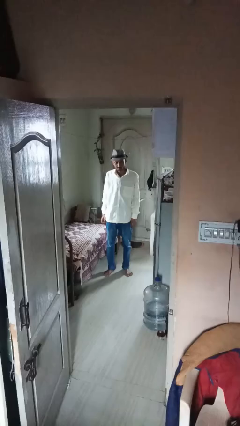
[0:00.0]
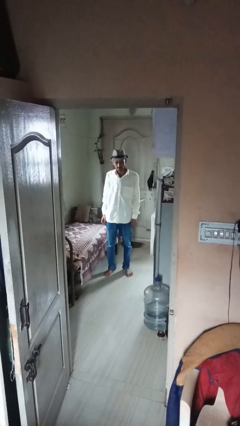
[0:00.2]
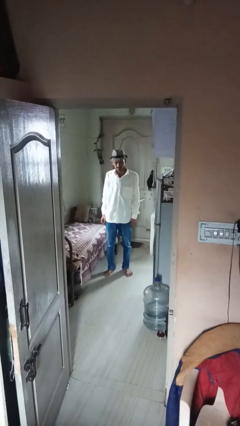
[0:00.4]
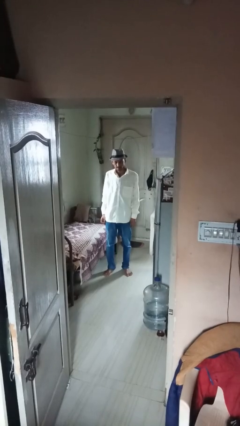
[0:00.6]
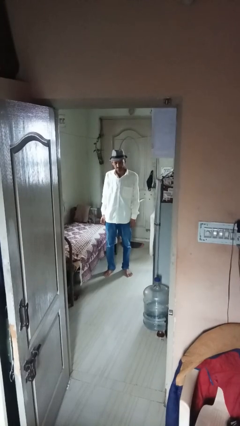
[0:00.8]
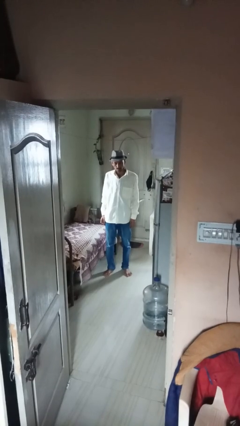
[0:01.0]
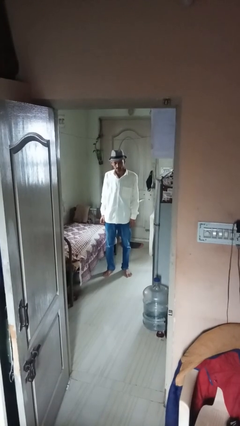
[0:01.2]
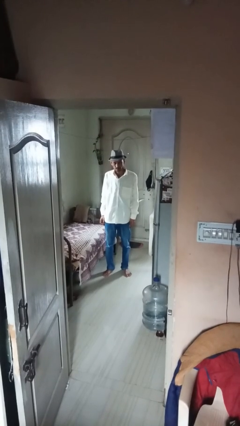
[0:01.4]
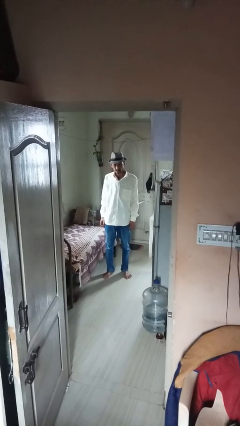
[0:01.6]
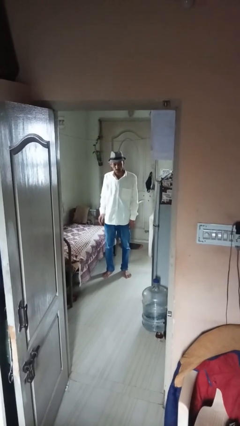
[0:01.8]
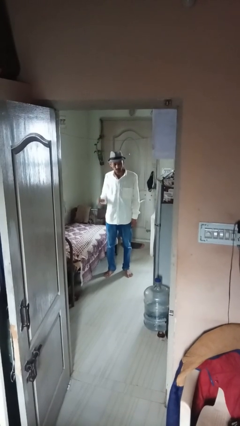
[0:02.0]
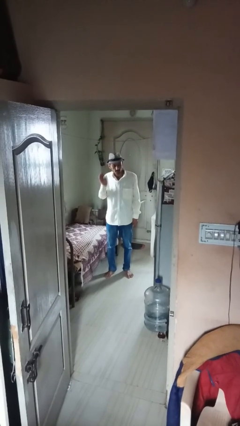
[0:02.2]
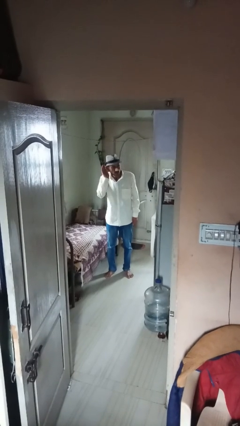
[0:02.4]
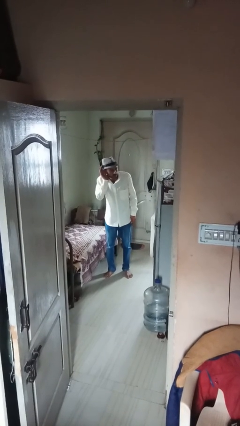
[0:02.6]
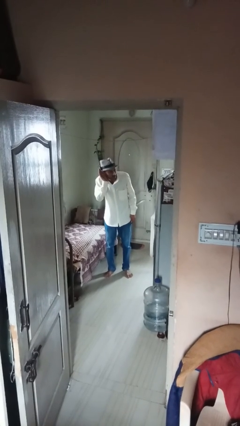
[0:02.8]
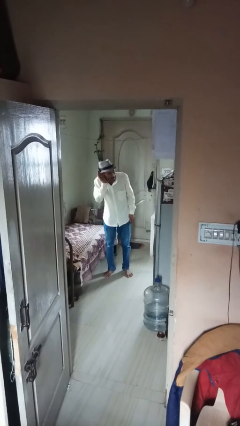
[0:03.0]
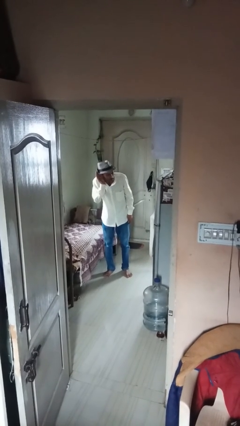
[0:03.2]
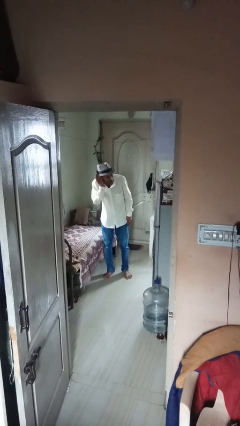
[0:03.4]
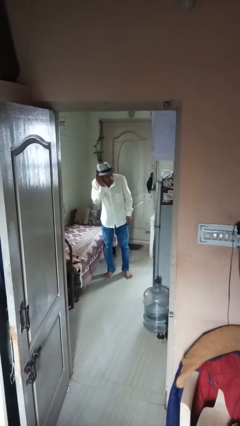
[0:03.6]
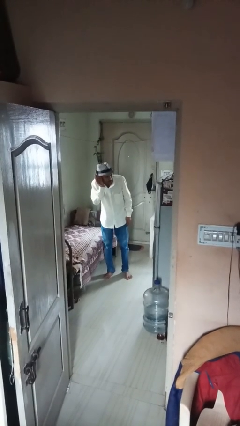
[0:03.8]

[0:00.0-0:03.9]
person gestures listen closely

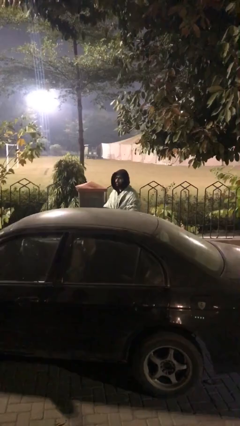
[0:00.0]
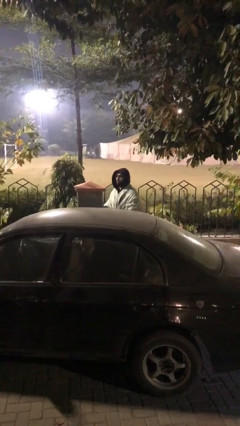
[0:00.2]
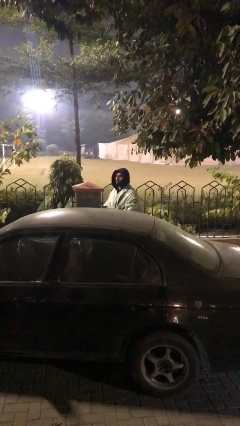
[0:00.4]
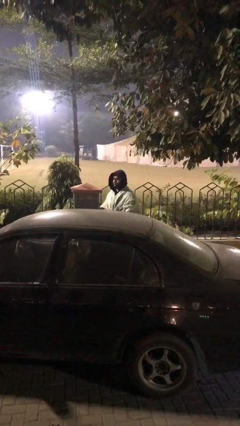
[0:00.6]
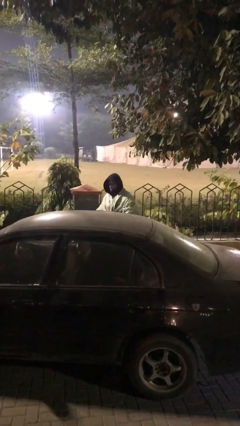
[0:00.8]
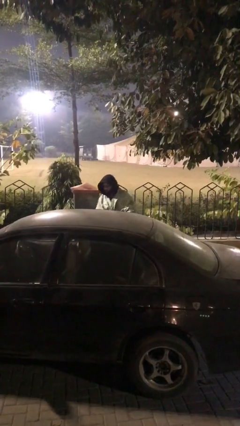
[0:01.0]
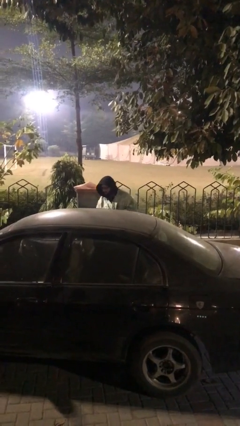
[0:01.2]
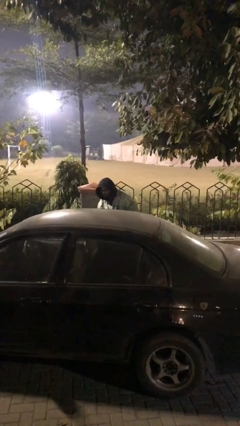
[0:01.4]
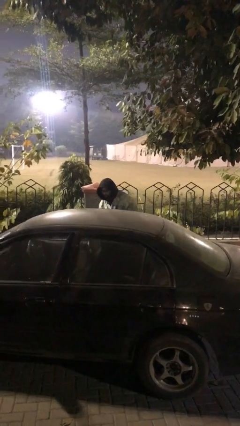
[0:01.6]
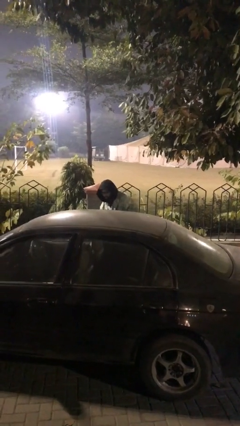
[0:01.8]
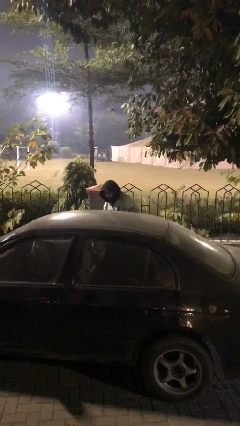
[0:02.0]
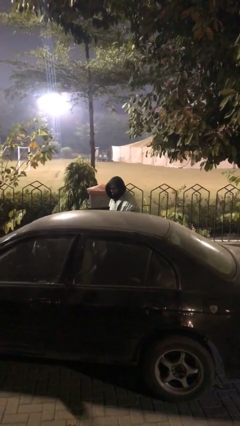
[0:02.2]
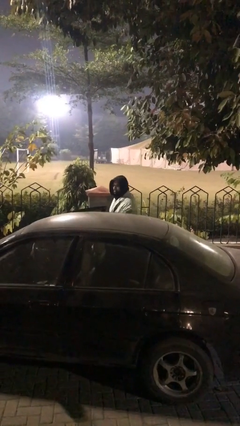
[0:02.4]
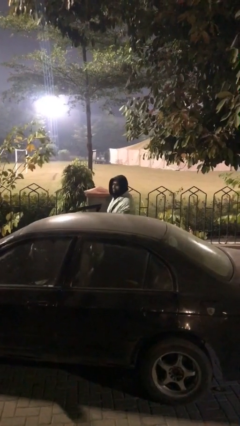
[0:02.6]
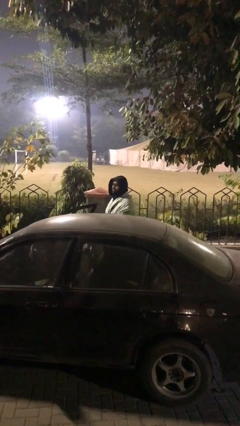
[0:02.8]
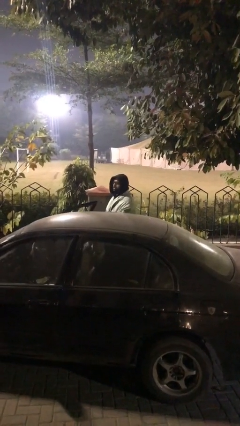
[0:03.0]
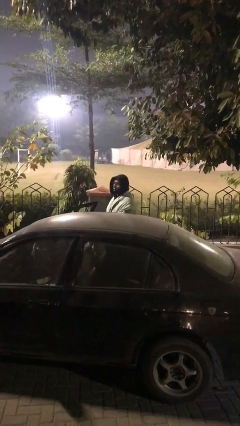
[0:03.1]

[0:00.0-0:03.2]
person opens car door

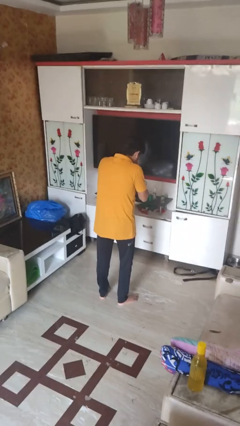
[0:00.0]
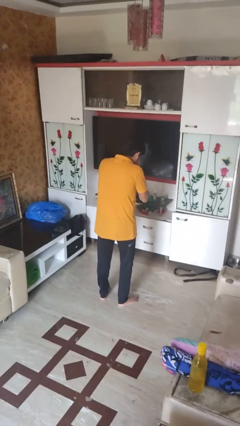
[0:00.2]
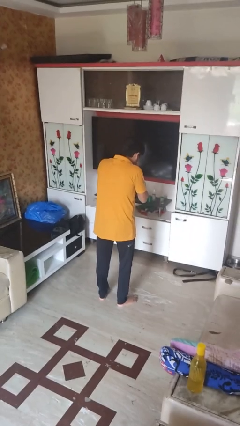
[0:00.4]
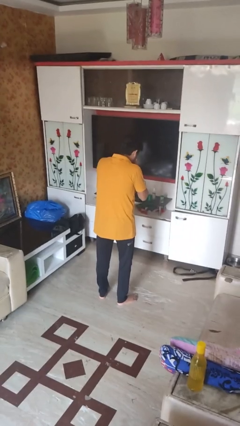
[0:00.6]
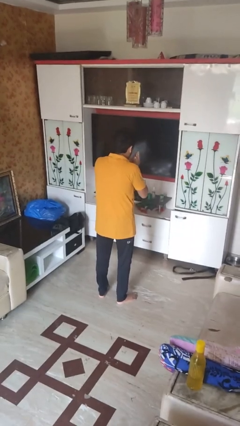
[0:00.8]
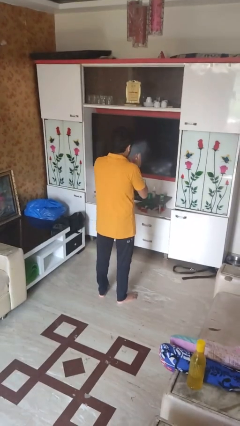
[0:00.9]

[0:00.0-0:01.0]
person sneezes into hand

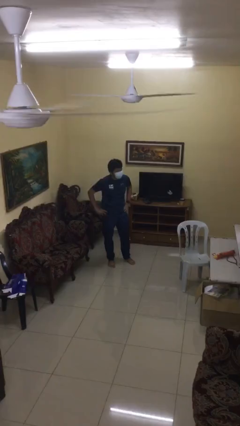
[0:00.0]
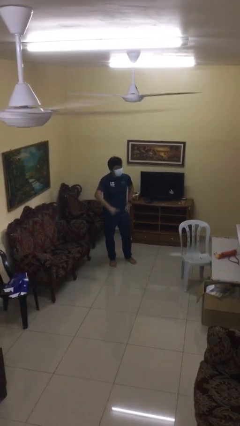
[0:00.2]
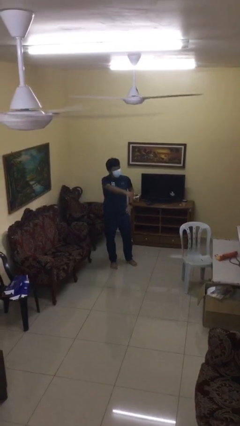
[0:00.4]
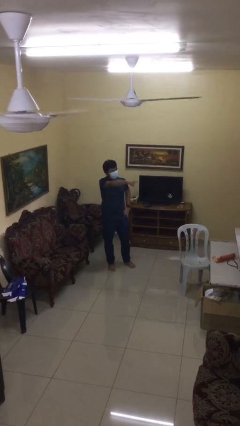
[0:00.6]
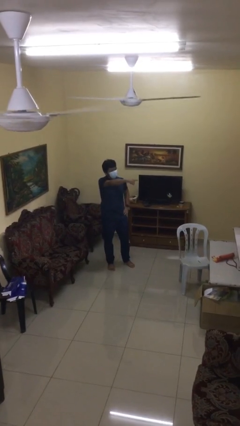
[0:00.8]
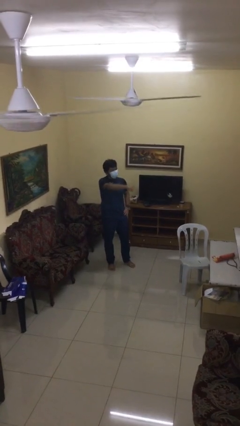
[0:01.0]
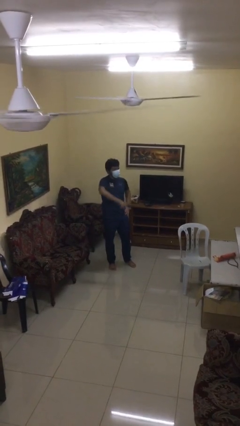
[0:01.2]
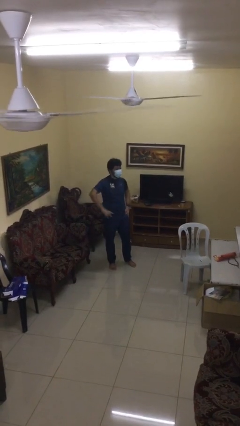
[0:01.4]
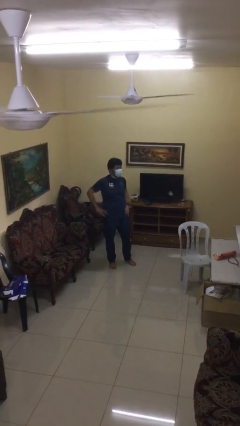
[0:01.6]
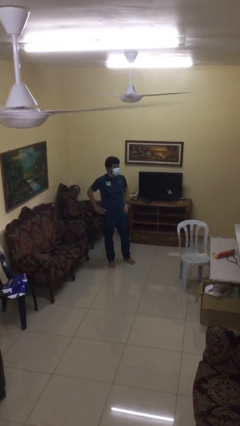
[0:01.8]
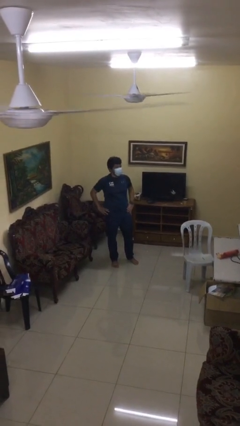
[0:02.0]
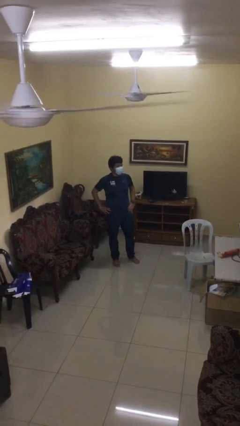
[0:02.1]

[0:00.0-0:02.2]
person points at person

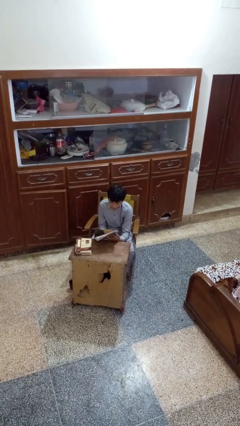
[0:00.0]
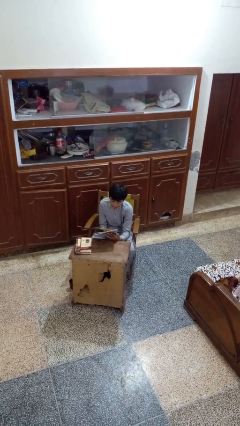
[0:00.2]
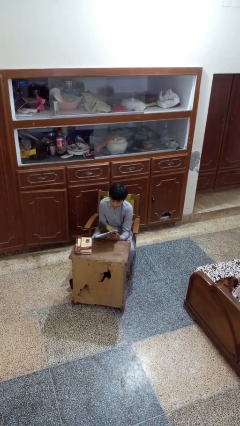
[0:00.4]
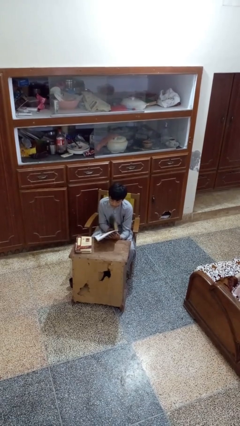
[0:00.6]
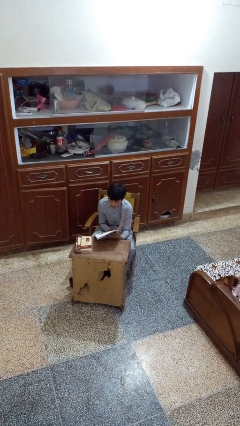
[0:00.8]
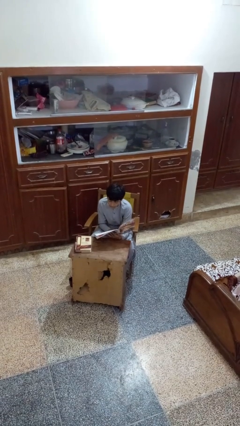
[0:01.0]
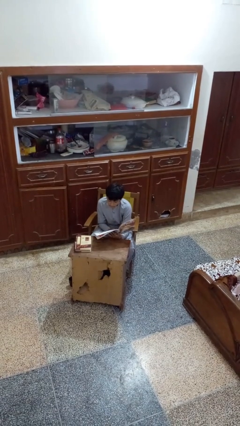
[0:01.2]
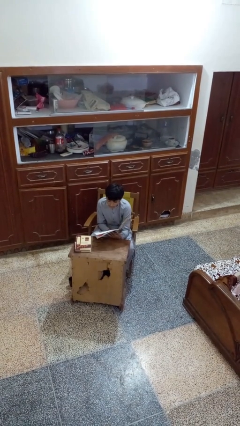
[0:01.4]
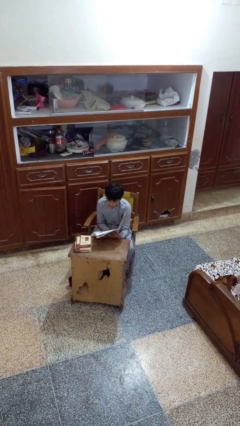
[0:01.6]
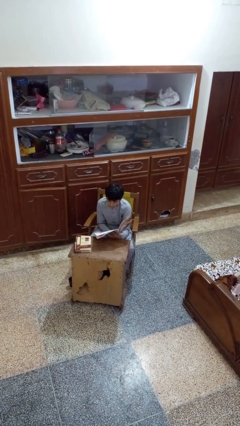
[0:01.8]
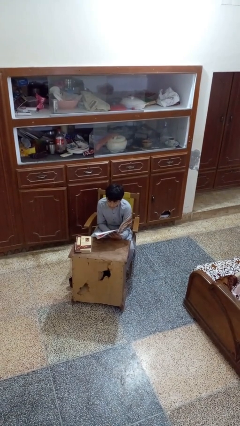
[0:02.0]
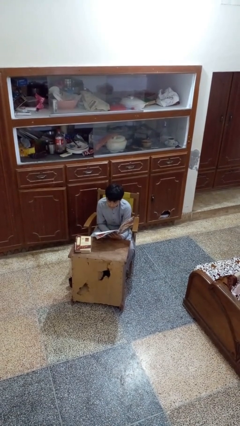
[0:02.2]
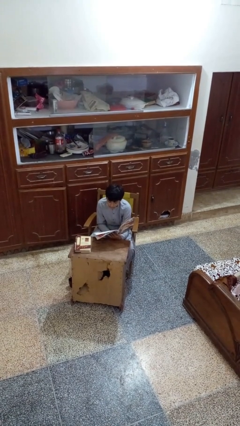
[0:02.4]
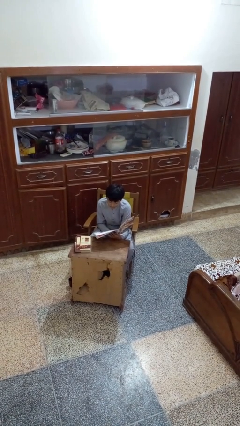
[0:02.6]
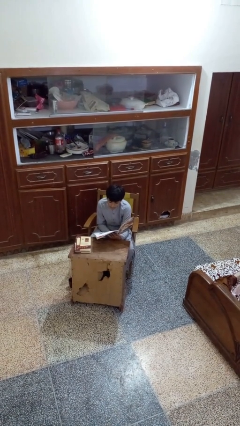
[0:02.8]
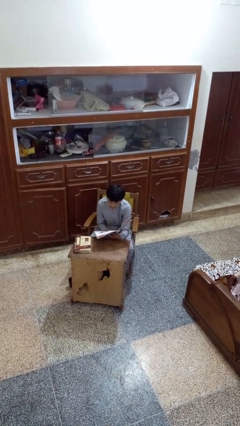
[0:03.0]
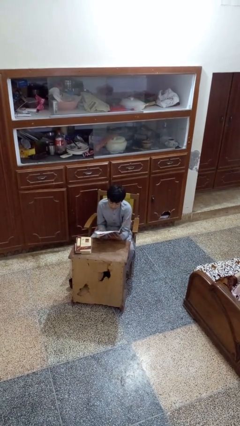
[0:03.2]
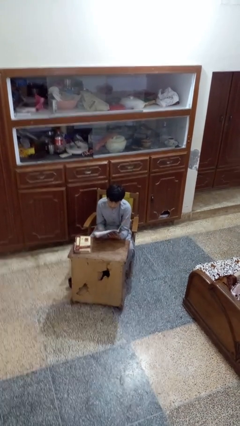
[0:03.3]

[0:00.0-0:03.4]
person reads magazine

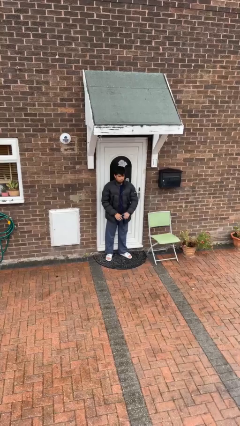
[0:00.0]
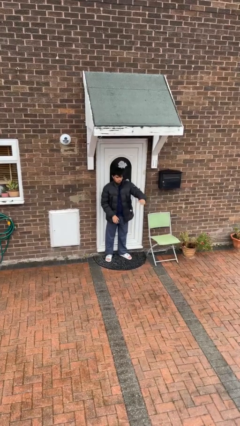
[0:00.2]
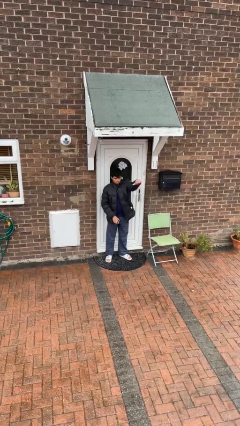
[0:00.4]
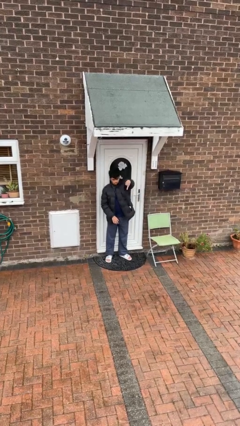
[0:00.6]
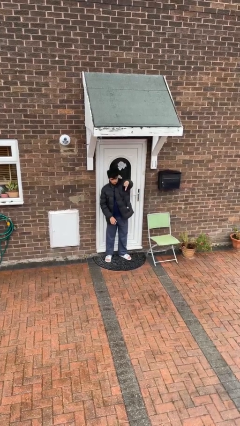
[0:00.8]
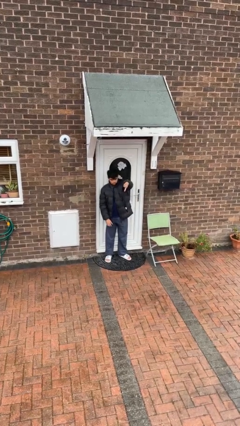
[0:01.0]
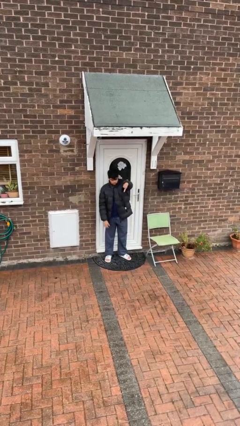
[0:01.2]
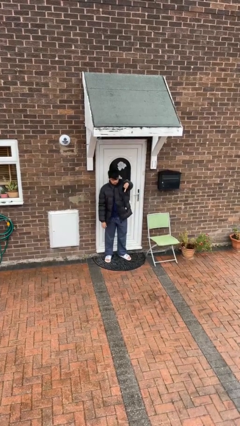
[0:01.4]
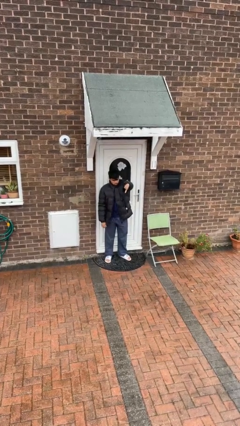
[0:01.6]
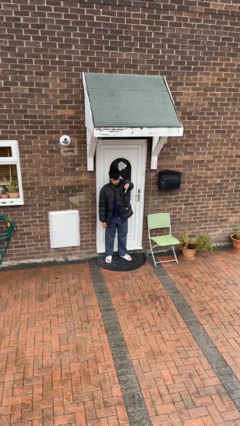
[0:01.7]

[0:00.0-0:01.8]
person gestures thumbs down

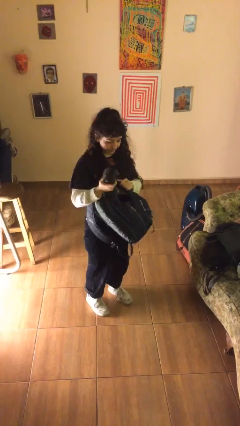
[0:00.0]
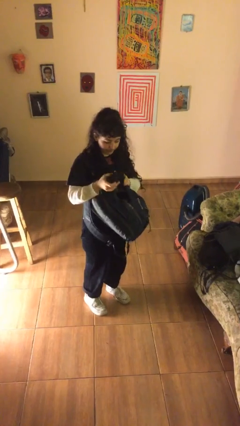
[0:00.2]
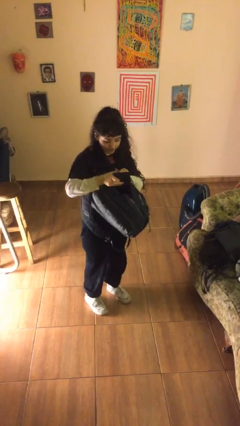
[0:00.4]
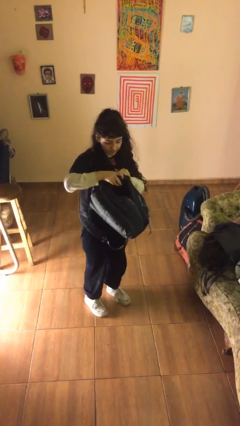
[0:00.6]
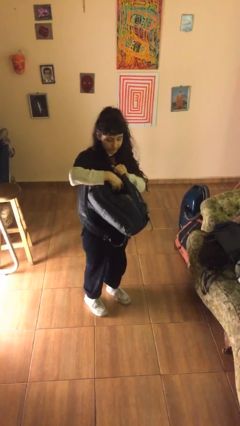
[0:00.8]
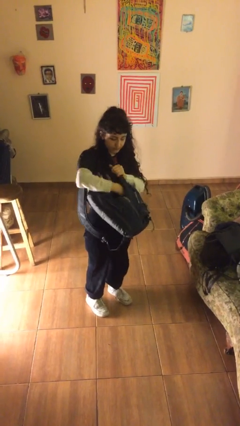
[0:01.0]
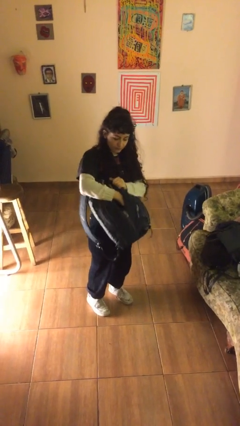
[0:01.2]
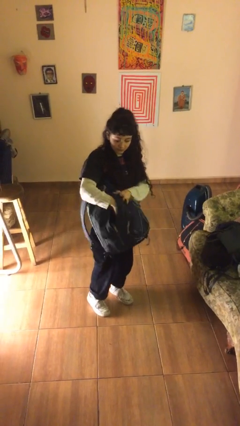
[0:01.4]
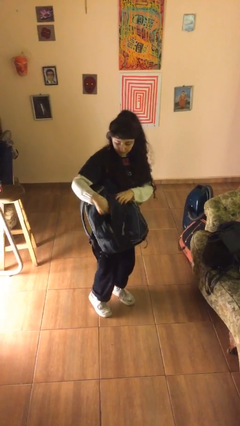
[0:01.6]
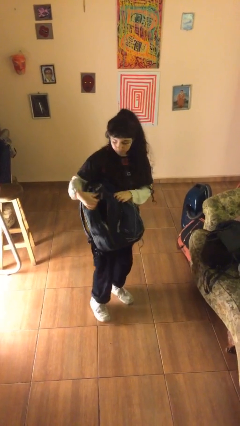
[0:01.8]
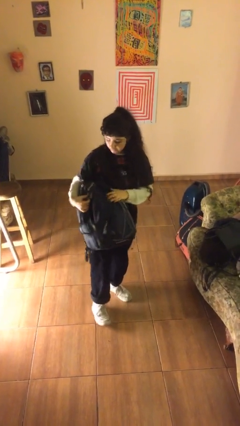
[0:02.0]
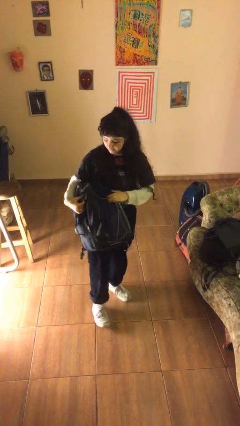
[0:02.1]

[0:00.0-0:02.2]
person puts object into backpack
